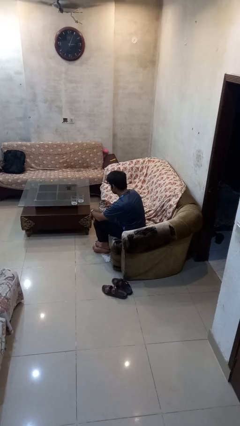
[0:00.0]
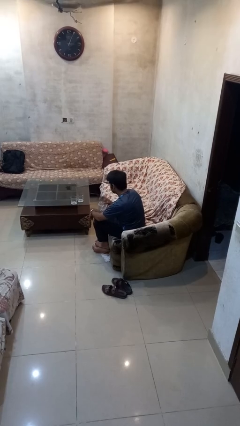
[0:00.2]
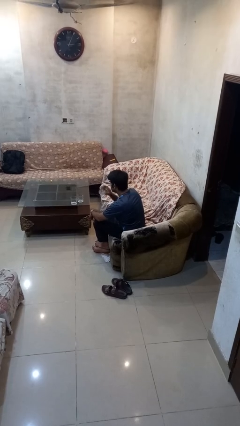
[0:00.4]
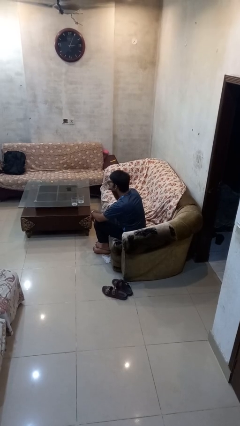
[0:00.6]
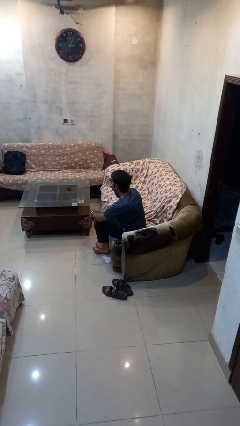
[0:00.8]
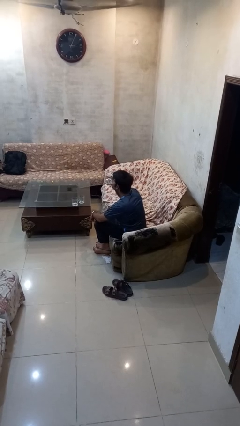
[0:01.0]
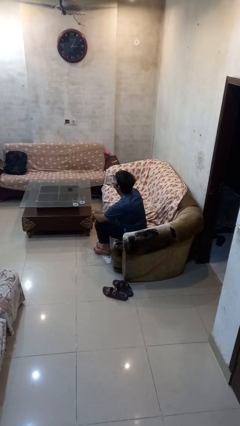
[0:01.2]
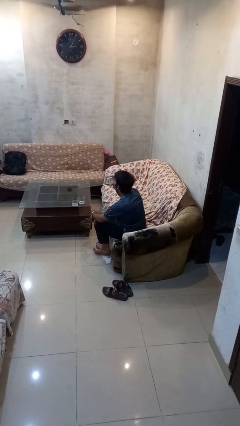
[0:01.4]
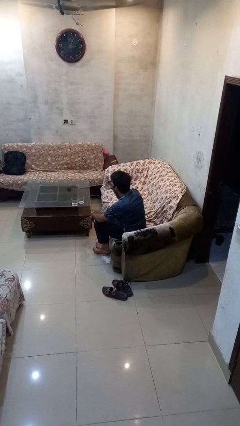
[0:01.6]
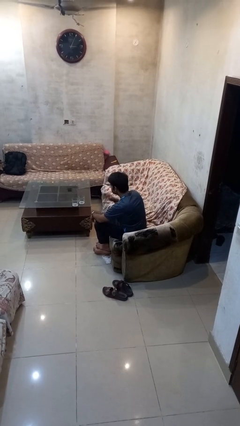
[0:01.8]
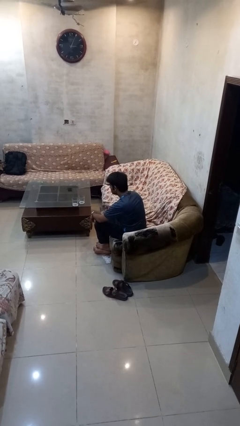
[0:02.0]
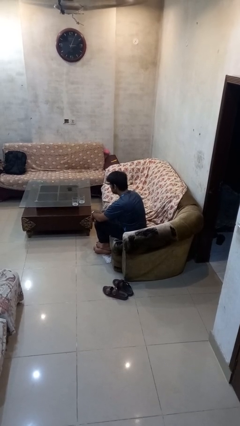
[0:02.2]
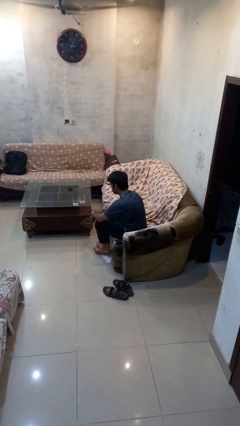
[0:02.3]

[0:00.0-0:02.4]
person drinks from shotglass

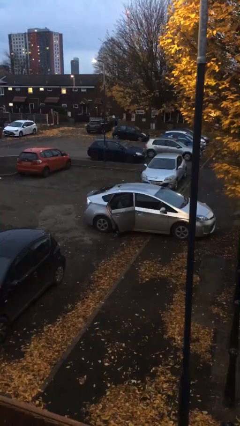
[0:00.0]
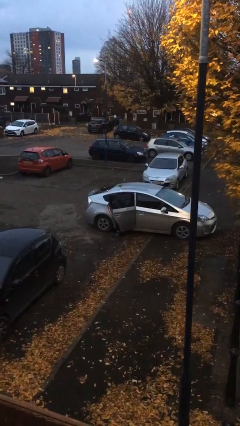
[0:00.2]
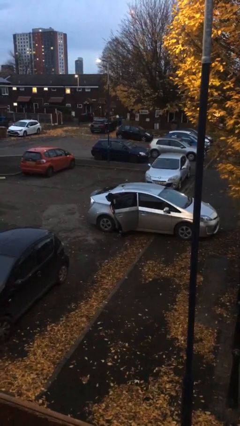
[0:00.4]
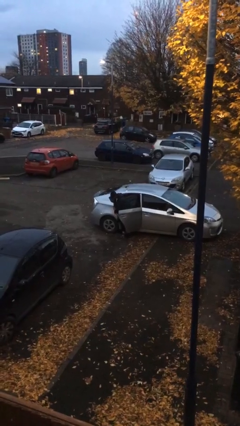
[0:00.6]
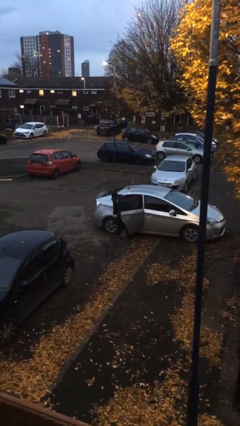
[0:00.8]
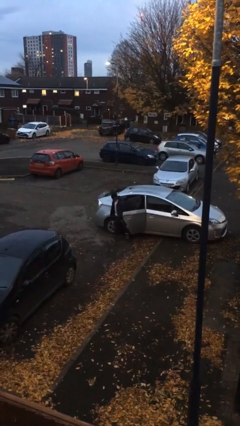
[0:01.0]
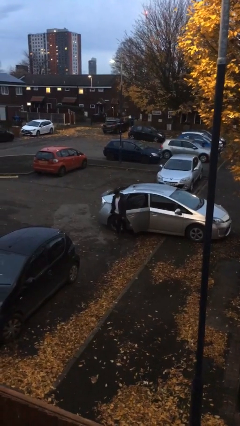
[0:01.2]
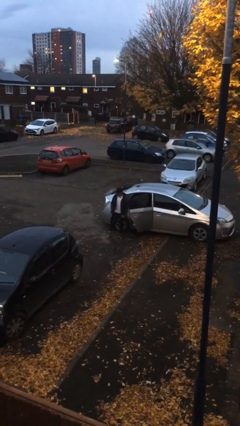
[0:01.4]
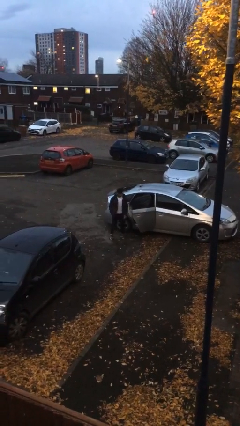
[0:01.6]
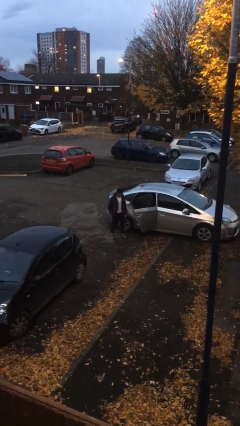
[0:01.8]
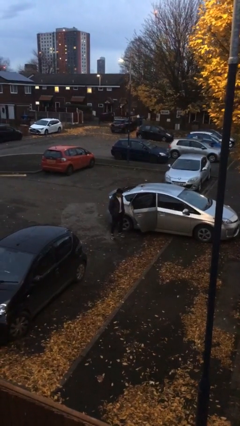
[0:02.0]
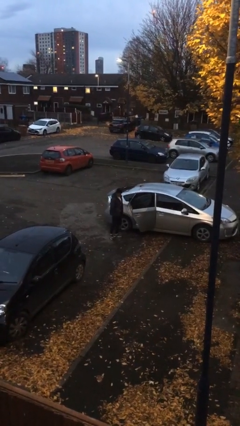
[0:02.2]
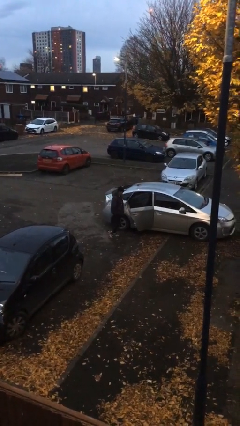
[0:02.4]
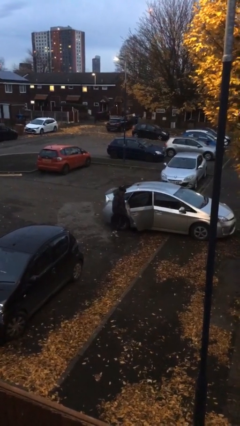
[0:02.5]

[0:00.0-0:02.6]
person exits car

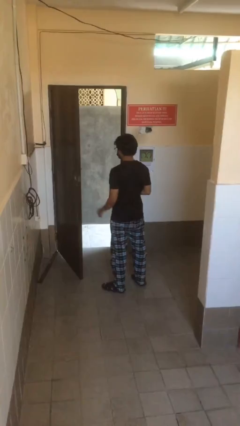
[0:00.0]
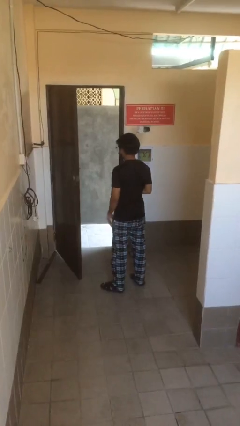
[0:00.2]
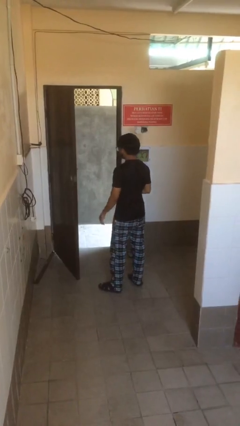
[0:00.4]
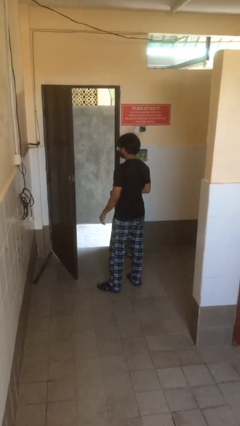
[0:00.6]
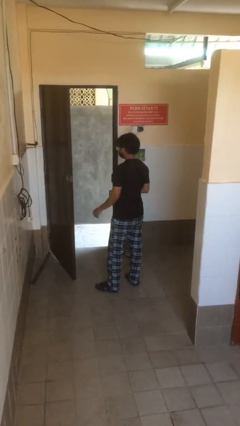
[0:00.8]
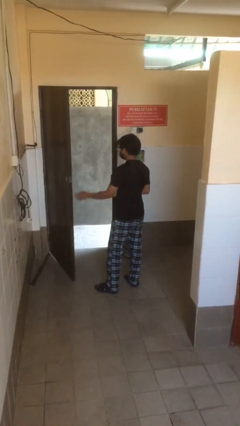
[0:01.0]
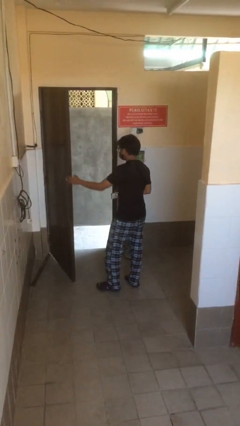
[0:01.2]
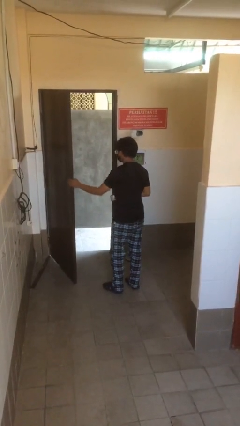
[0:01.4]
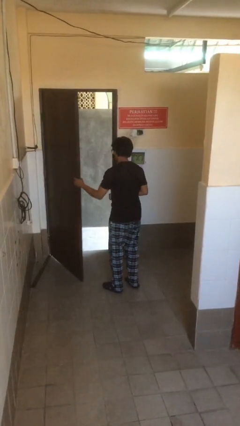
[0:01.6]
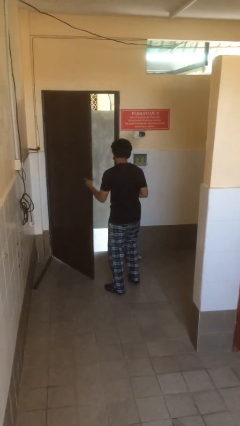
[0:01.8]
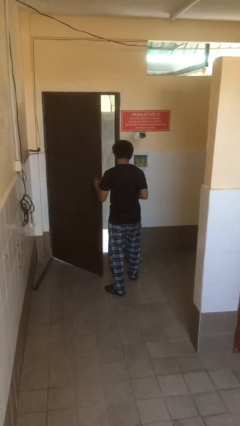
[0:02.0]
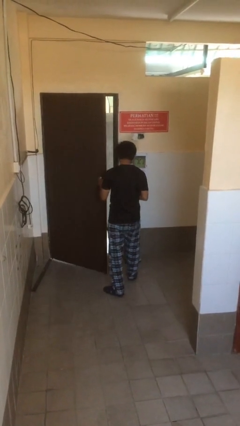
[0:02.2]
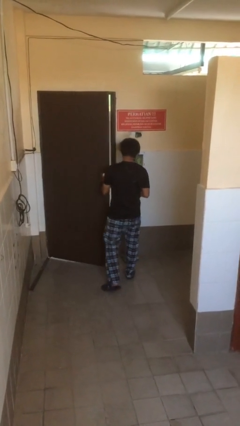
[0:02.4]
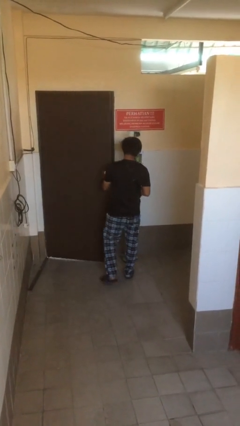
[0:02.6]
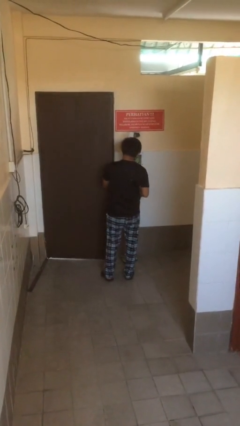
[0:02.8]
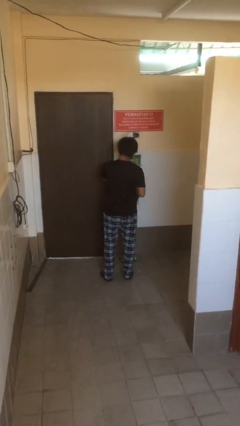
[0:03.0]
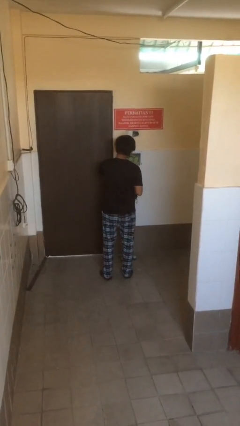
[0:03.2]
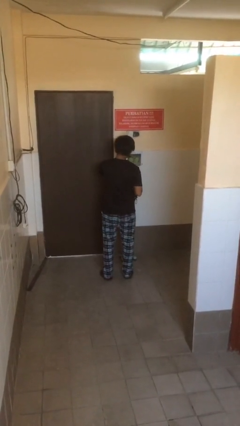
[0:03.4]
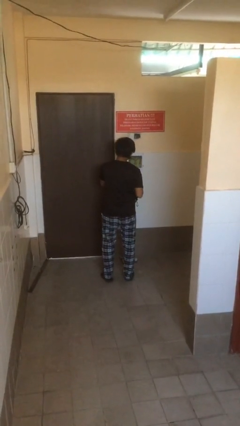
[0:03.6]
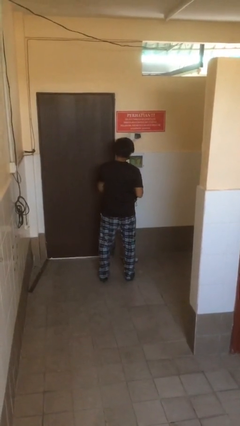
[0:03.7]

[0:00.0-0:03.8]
person closes facility door

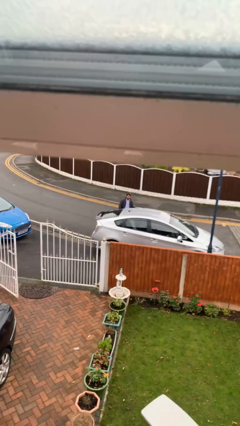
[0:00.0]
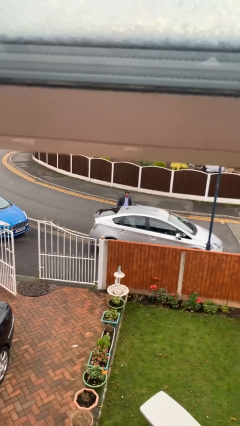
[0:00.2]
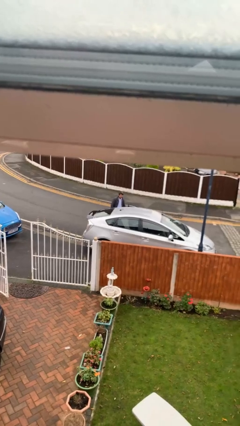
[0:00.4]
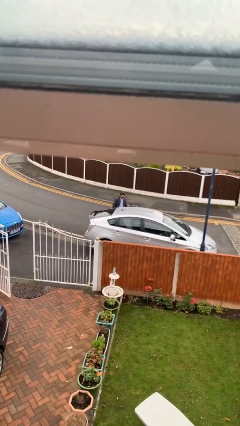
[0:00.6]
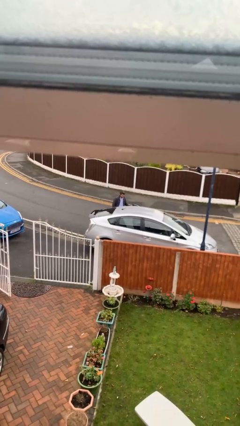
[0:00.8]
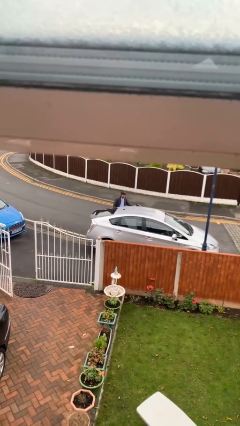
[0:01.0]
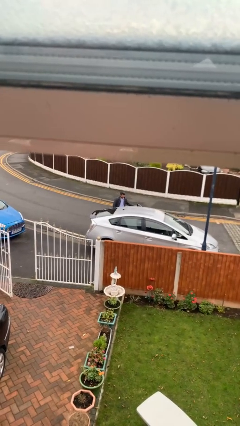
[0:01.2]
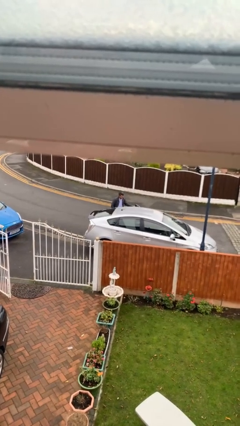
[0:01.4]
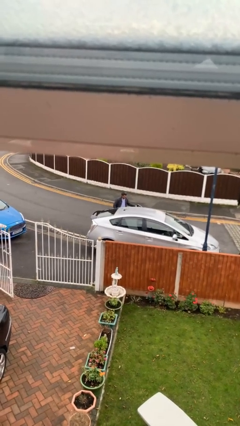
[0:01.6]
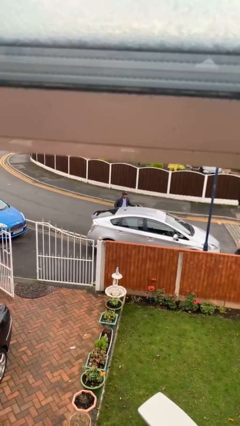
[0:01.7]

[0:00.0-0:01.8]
person opens car door

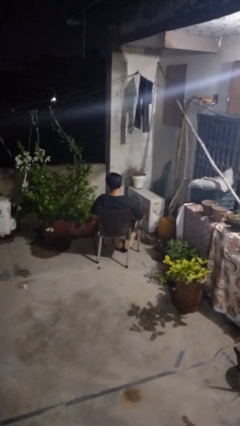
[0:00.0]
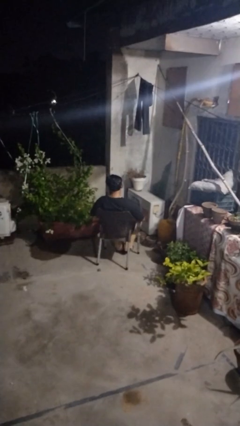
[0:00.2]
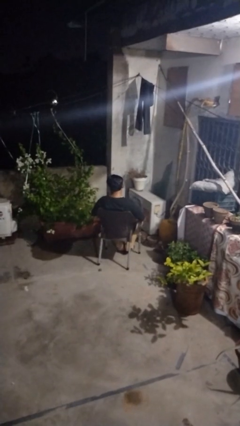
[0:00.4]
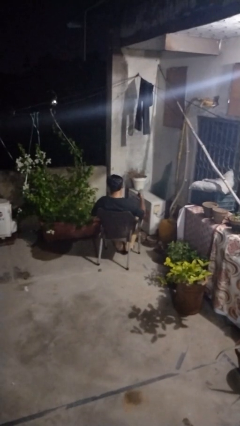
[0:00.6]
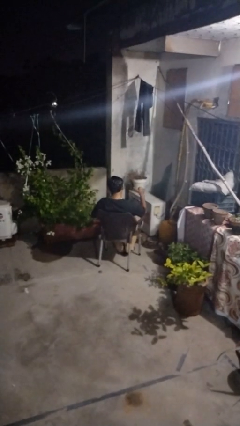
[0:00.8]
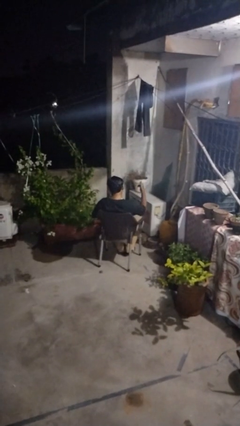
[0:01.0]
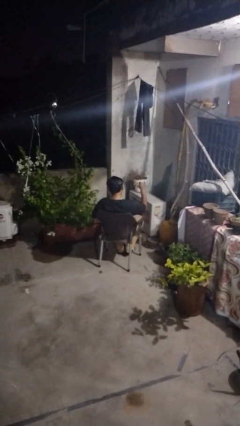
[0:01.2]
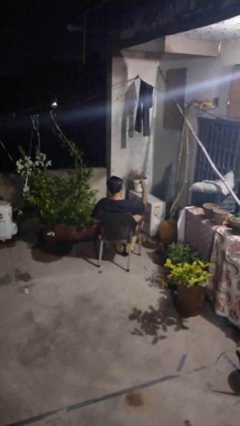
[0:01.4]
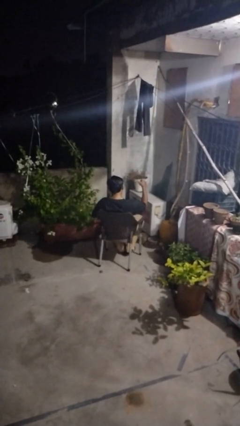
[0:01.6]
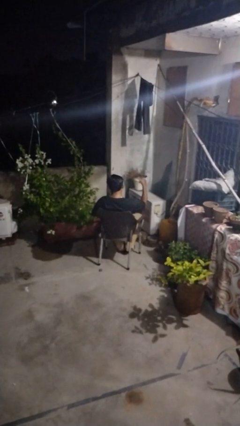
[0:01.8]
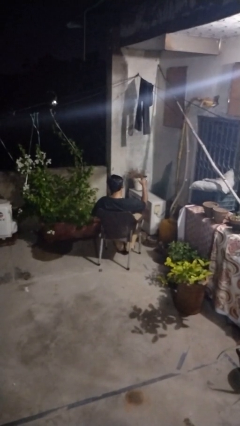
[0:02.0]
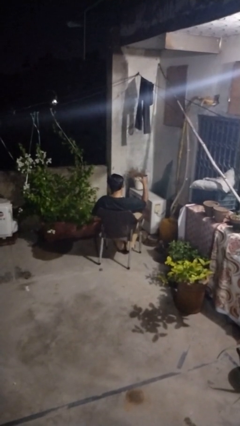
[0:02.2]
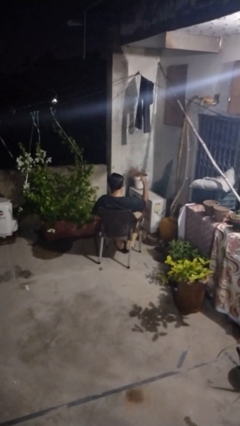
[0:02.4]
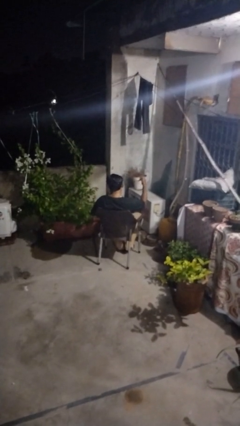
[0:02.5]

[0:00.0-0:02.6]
person gestures hang loose

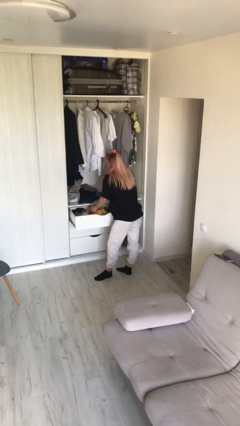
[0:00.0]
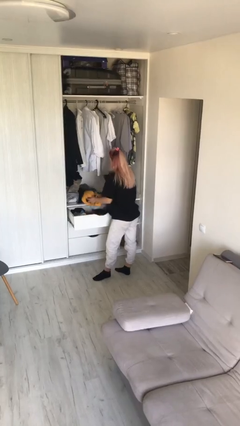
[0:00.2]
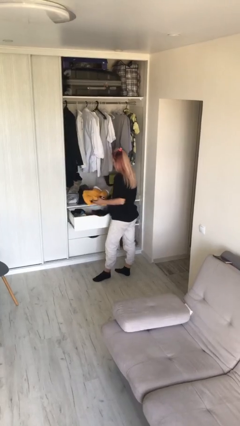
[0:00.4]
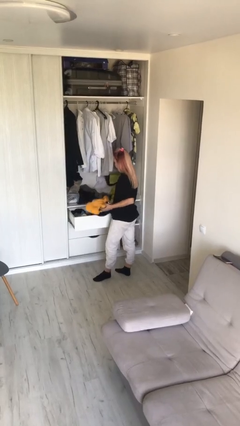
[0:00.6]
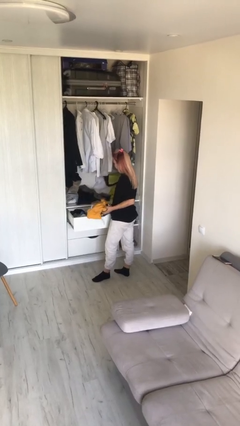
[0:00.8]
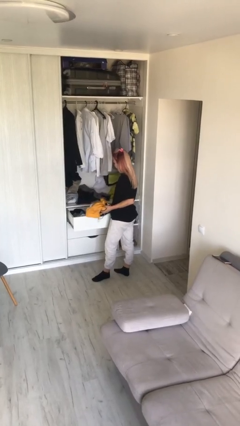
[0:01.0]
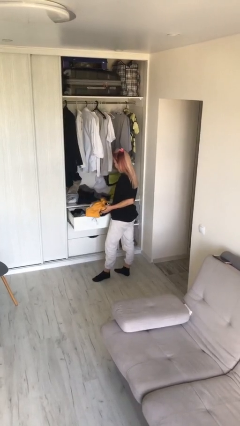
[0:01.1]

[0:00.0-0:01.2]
person takes clothes from dresser

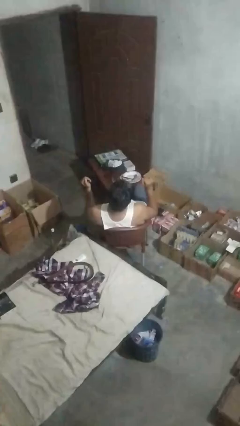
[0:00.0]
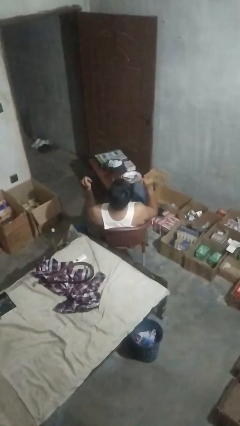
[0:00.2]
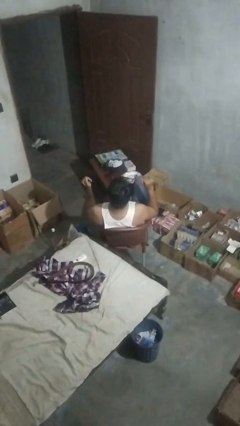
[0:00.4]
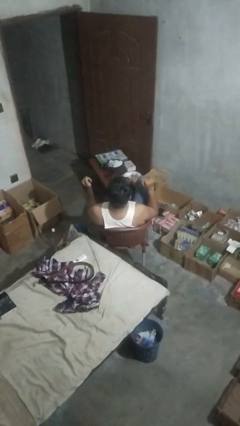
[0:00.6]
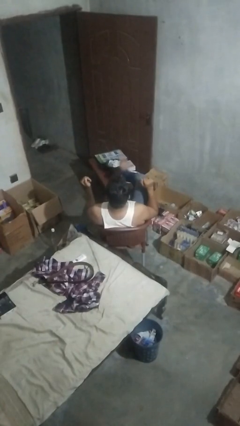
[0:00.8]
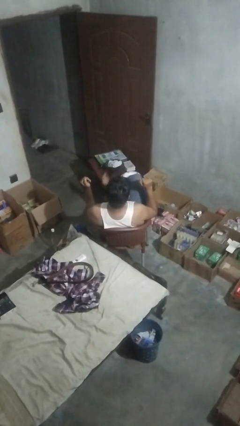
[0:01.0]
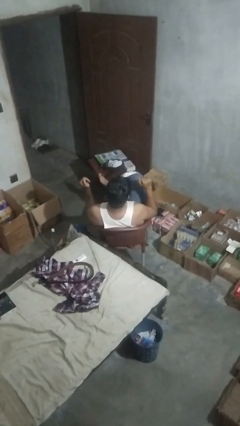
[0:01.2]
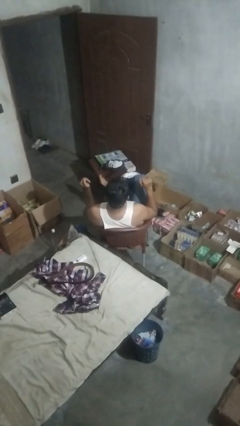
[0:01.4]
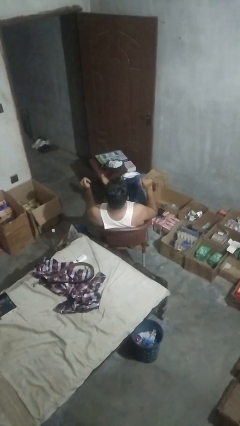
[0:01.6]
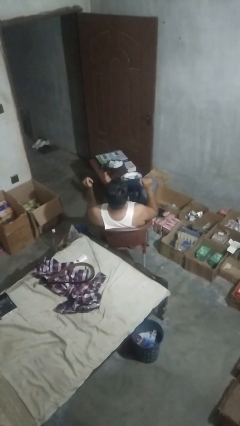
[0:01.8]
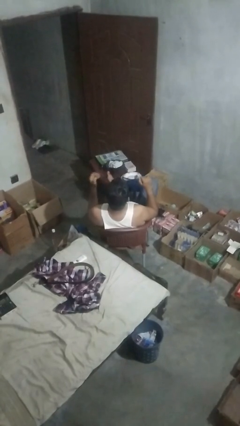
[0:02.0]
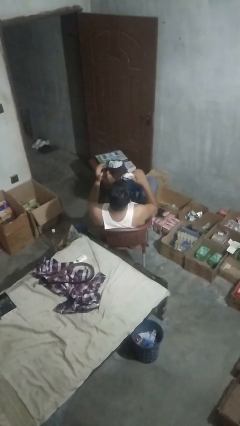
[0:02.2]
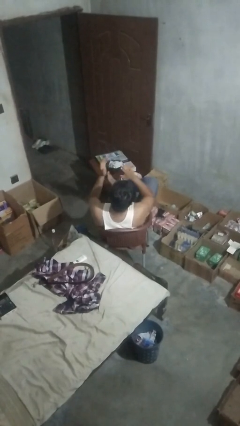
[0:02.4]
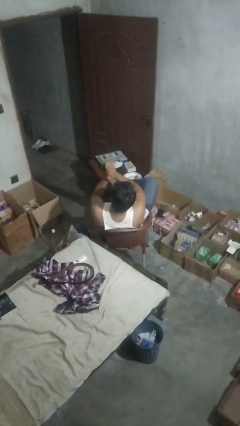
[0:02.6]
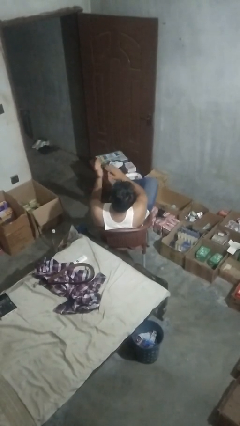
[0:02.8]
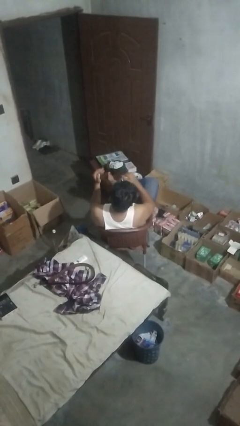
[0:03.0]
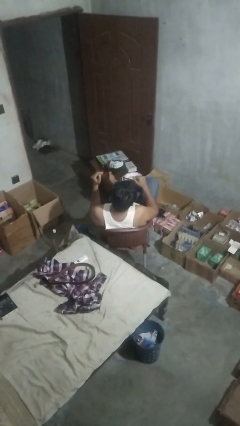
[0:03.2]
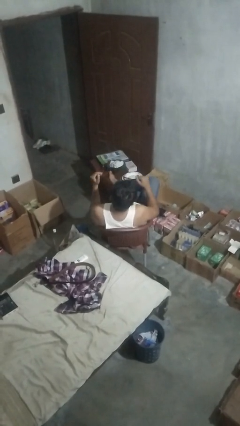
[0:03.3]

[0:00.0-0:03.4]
person claps hands
